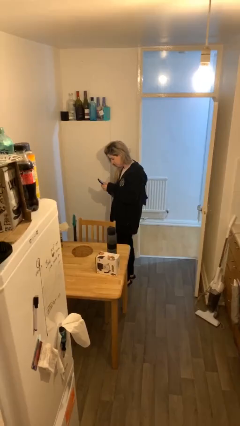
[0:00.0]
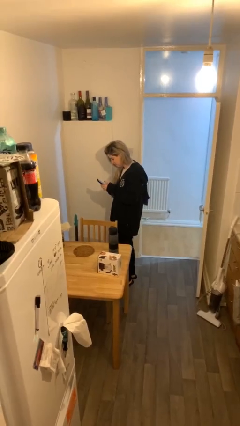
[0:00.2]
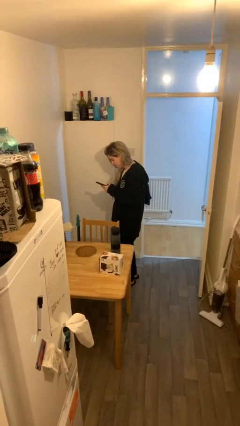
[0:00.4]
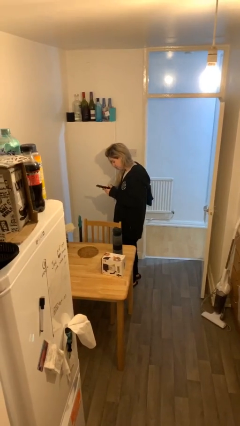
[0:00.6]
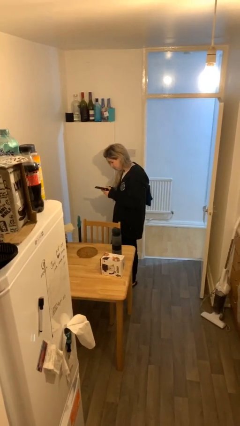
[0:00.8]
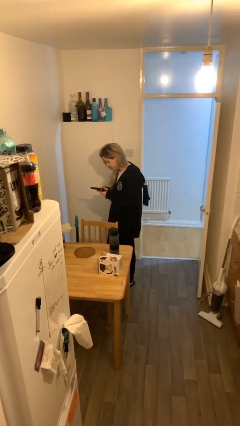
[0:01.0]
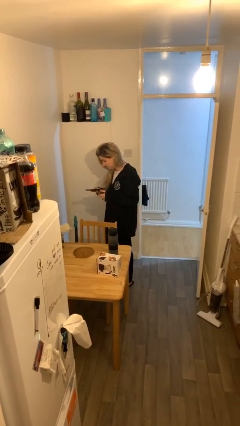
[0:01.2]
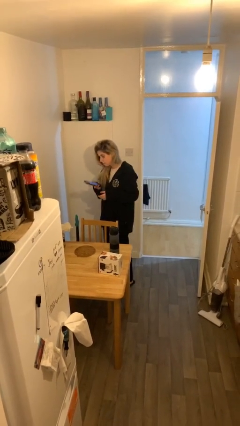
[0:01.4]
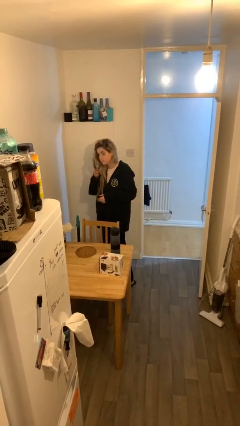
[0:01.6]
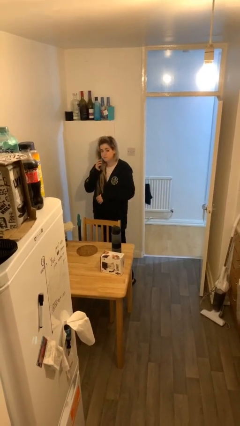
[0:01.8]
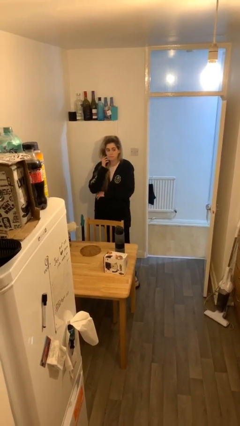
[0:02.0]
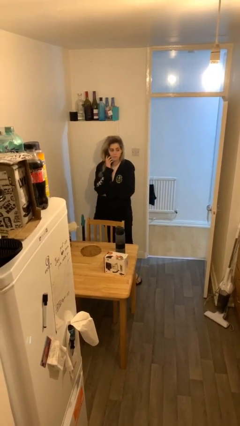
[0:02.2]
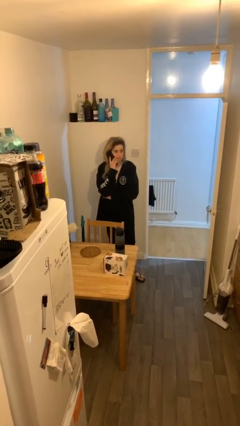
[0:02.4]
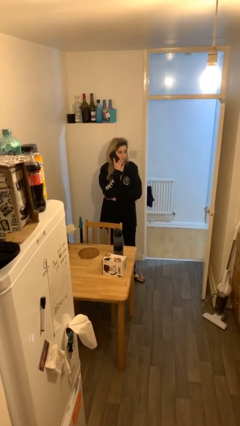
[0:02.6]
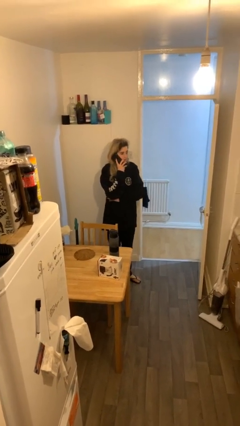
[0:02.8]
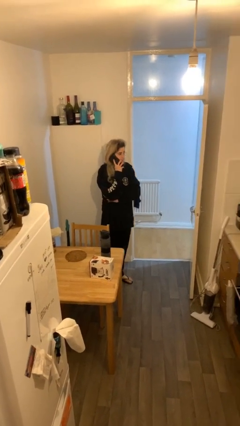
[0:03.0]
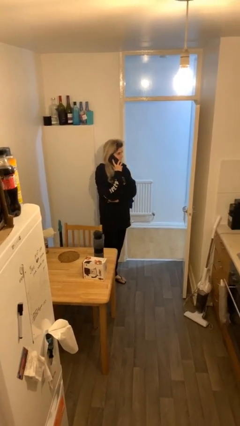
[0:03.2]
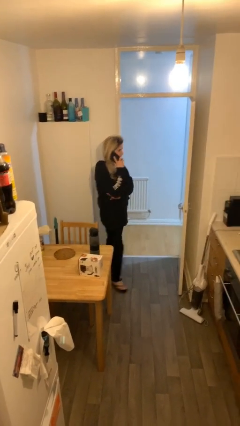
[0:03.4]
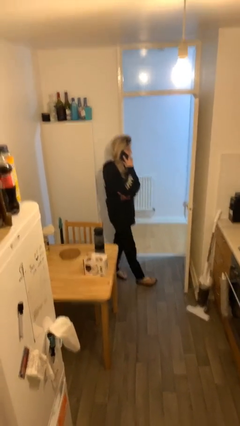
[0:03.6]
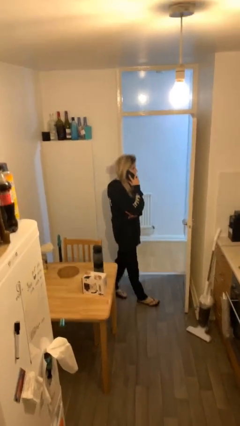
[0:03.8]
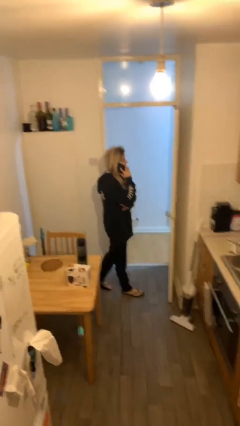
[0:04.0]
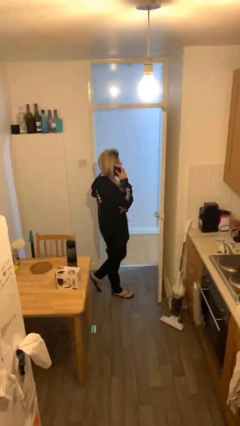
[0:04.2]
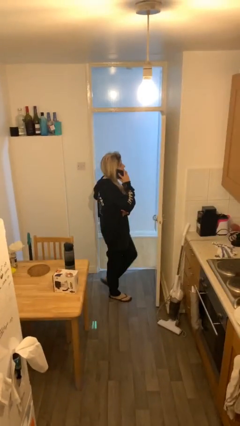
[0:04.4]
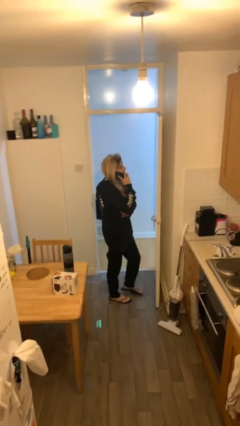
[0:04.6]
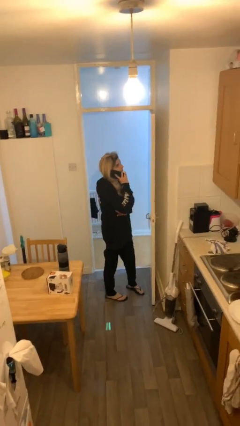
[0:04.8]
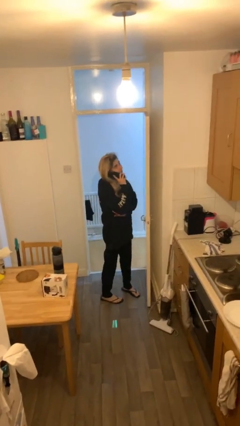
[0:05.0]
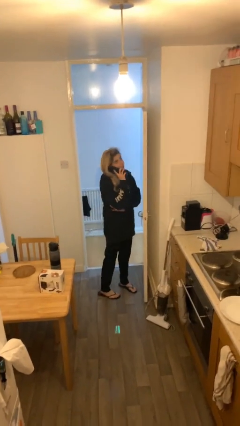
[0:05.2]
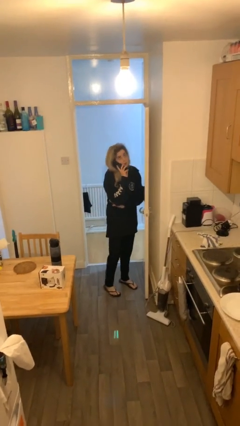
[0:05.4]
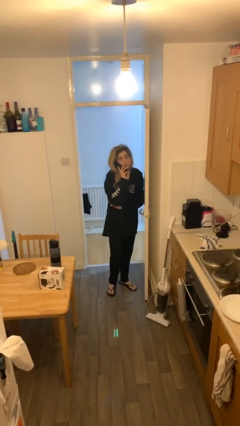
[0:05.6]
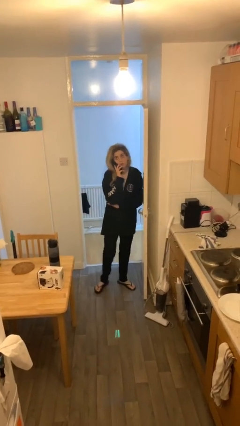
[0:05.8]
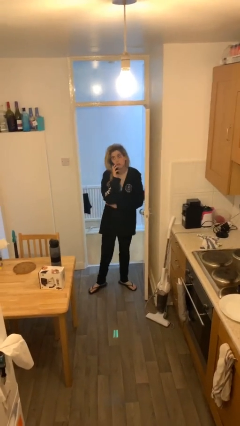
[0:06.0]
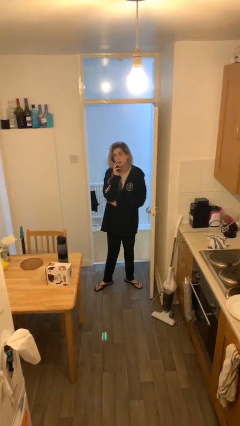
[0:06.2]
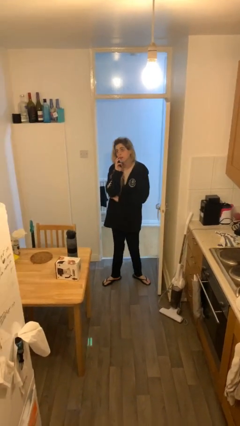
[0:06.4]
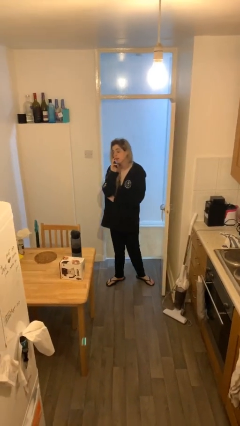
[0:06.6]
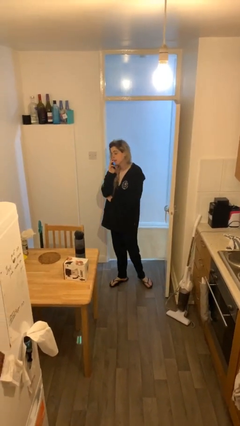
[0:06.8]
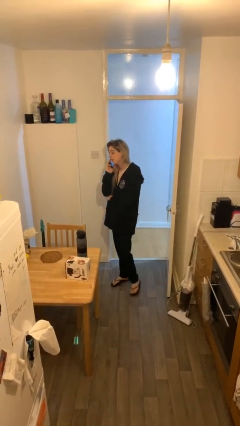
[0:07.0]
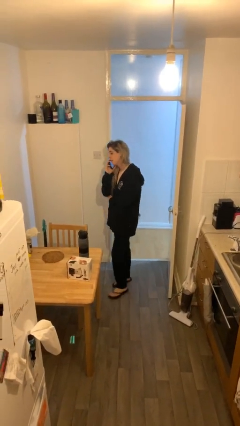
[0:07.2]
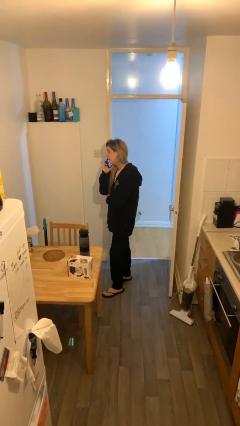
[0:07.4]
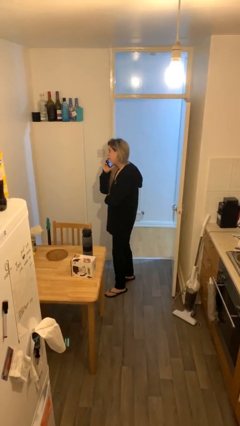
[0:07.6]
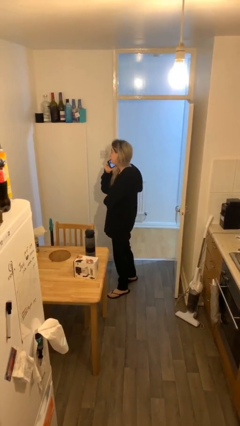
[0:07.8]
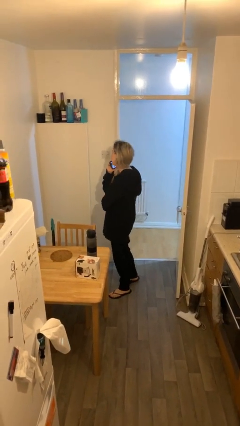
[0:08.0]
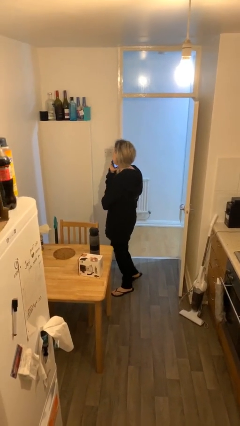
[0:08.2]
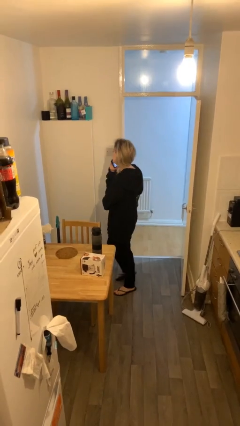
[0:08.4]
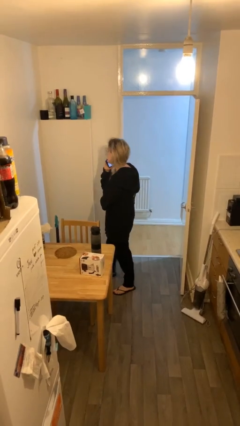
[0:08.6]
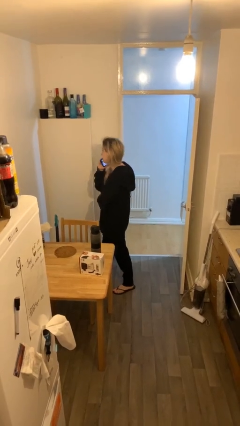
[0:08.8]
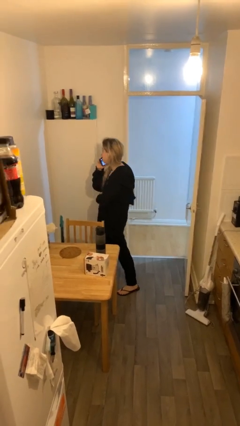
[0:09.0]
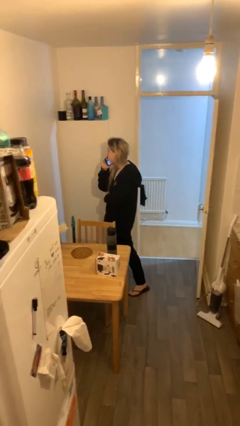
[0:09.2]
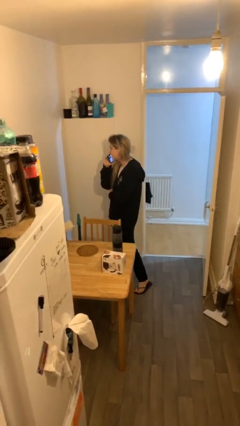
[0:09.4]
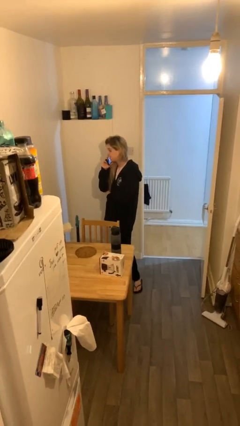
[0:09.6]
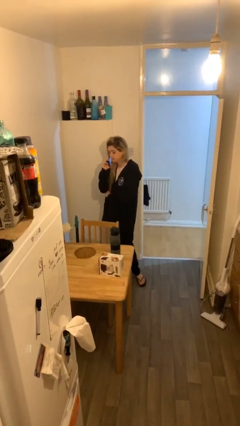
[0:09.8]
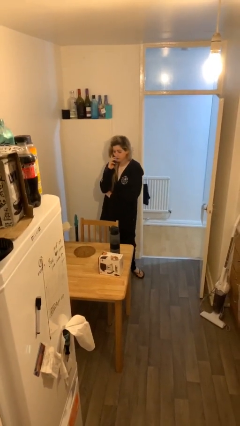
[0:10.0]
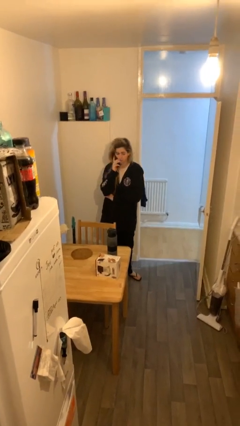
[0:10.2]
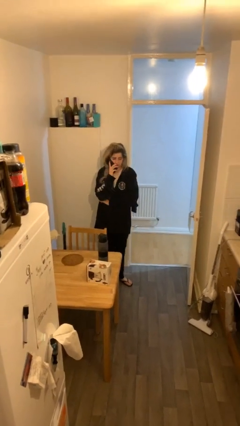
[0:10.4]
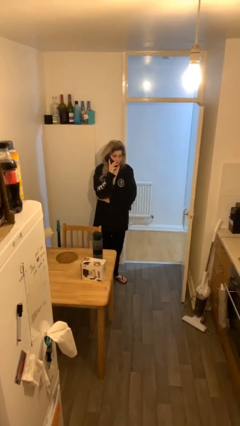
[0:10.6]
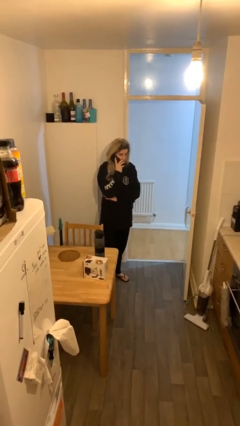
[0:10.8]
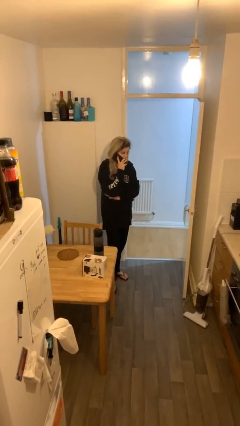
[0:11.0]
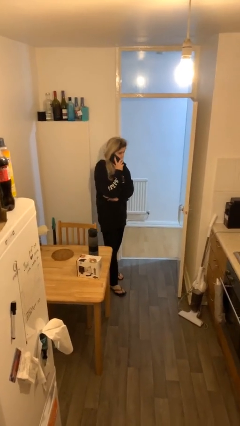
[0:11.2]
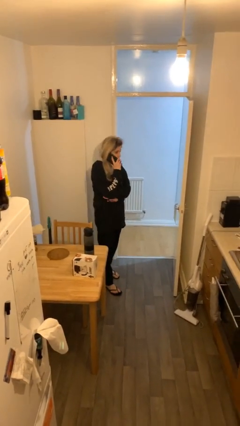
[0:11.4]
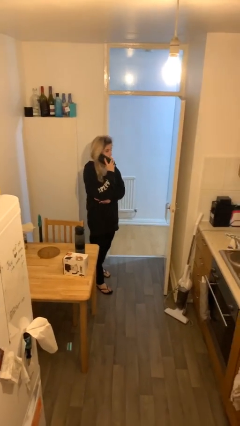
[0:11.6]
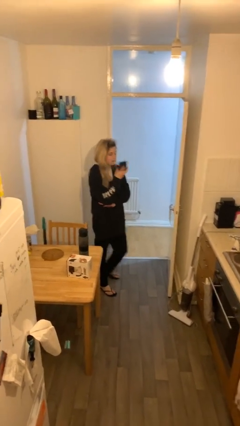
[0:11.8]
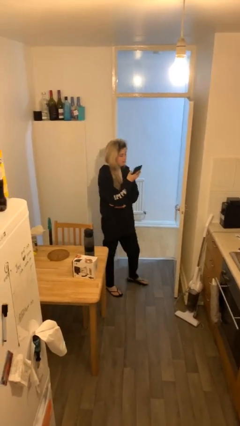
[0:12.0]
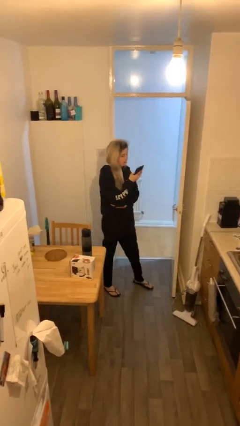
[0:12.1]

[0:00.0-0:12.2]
person talks on phone

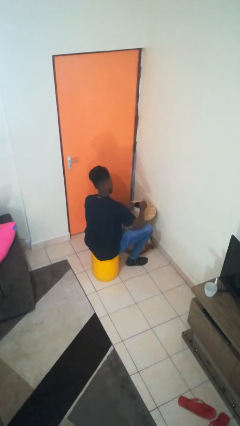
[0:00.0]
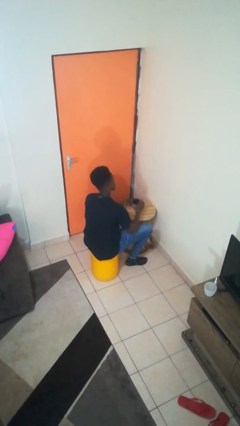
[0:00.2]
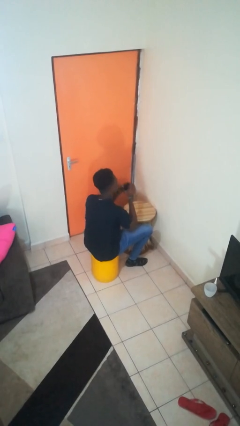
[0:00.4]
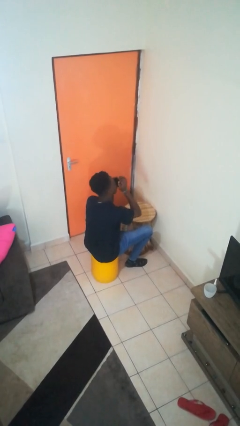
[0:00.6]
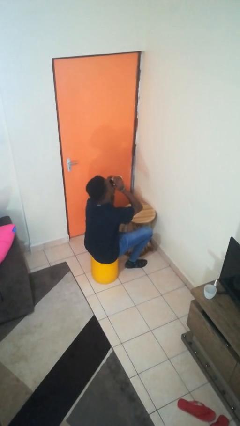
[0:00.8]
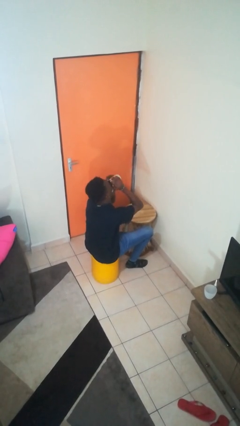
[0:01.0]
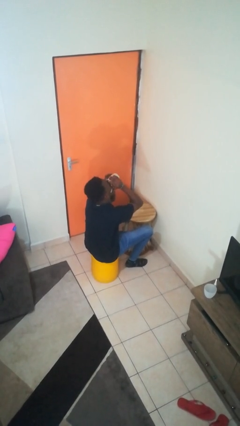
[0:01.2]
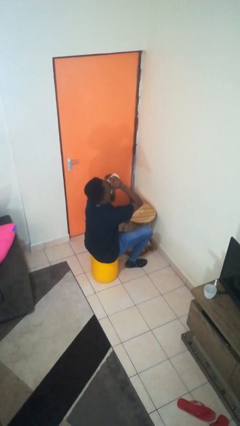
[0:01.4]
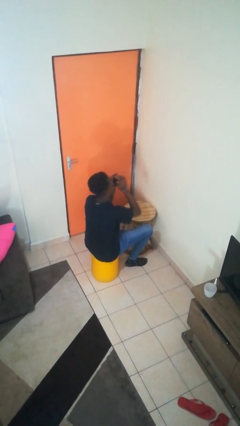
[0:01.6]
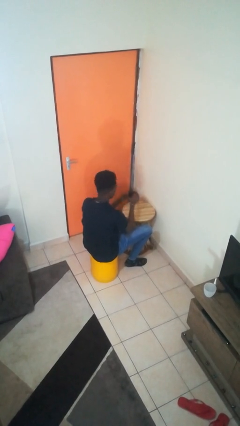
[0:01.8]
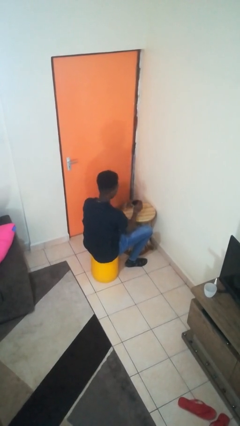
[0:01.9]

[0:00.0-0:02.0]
person drinks from mug

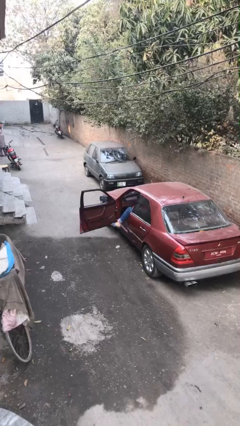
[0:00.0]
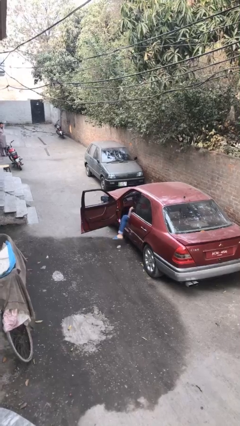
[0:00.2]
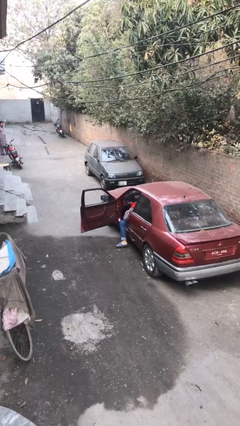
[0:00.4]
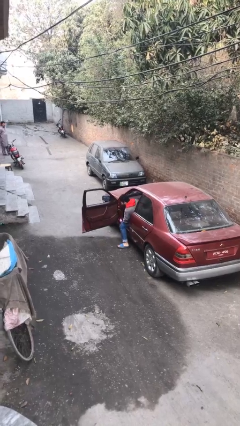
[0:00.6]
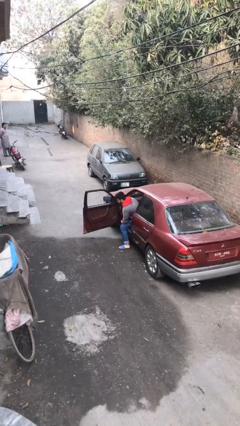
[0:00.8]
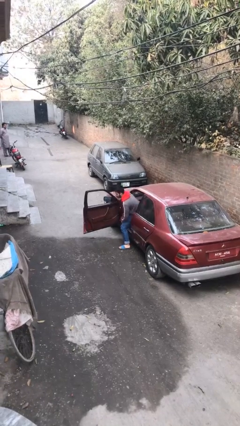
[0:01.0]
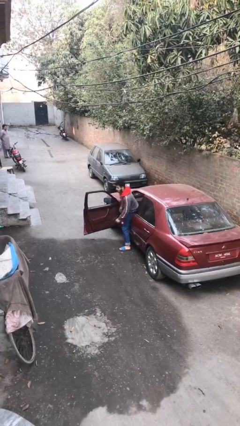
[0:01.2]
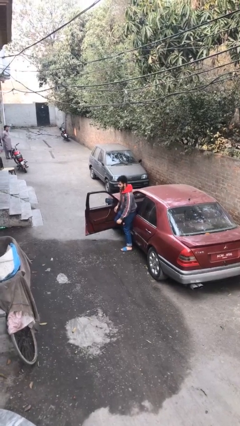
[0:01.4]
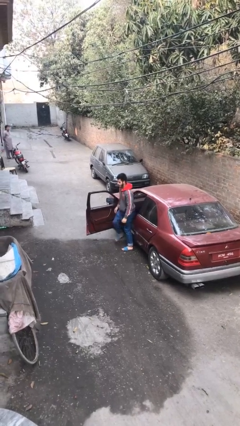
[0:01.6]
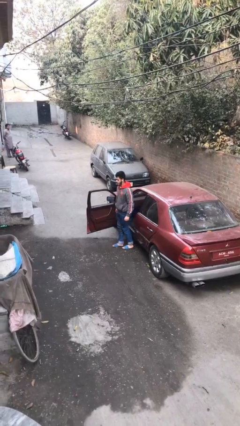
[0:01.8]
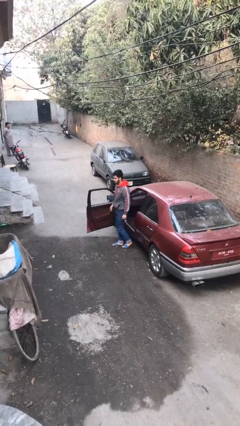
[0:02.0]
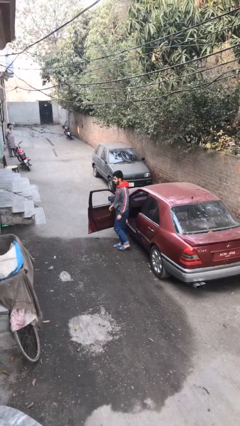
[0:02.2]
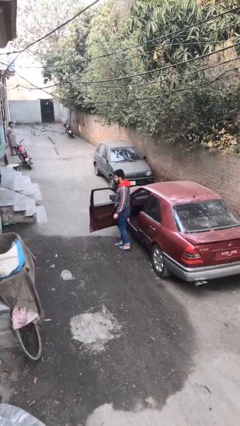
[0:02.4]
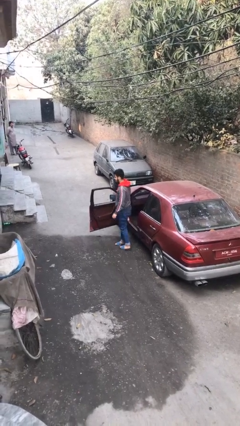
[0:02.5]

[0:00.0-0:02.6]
person exits car

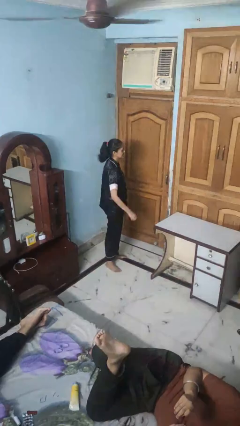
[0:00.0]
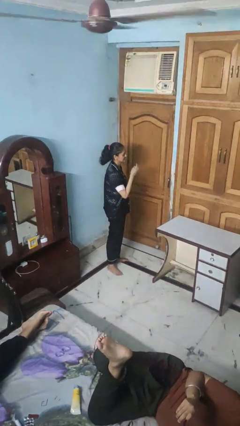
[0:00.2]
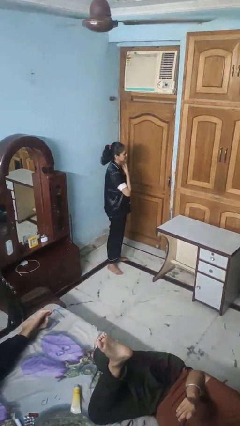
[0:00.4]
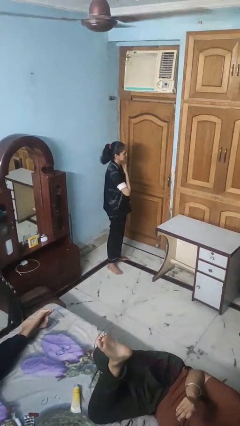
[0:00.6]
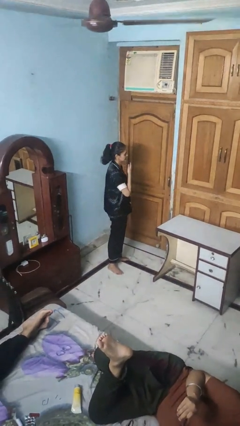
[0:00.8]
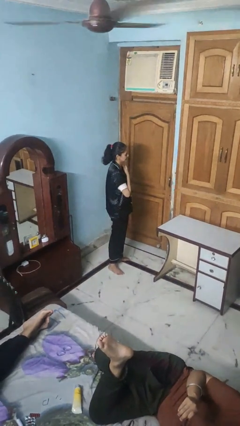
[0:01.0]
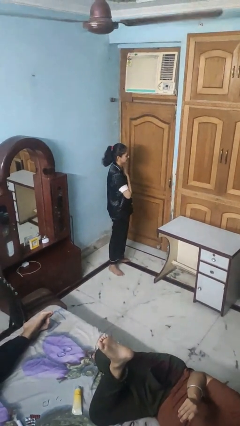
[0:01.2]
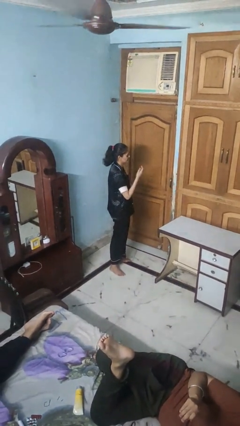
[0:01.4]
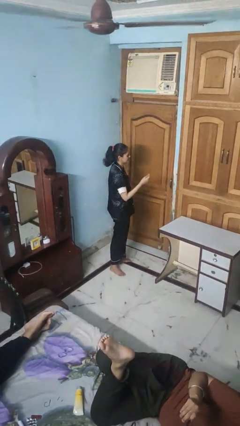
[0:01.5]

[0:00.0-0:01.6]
person drums on chest
